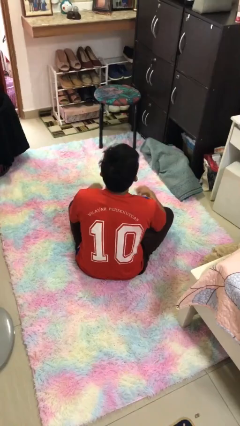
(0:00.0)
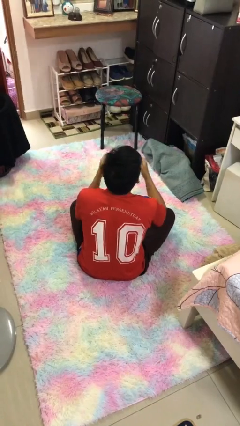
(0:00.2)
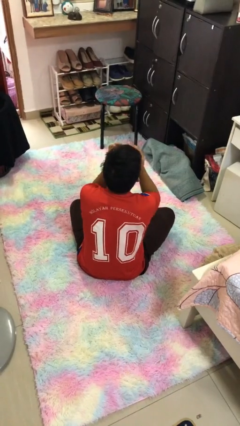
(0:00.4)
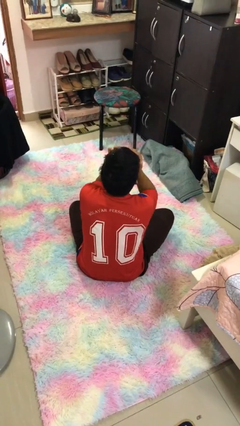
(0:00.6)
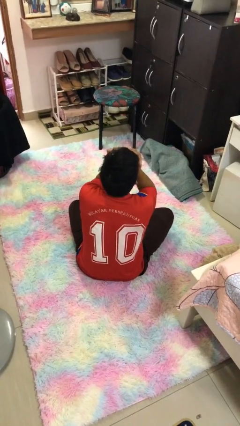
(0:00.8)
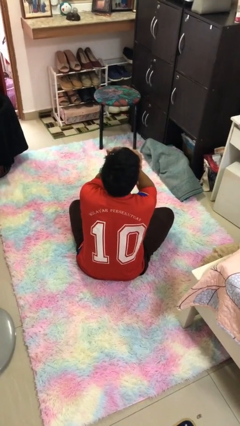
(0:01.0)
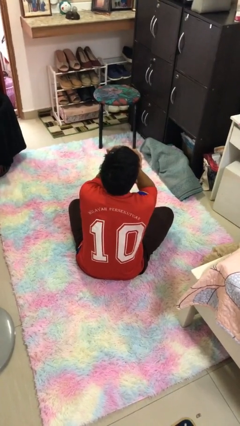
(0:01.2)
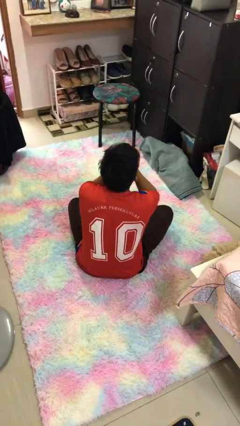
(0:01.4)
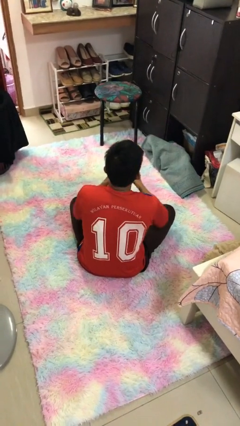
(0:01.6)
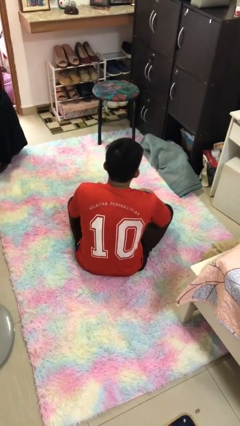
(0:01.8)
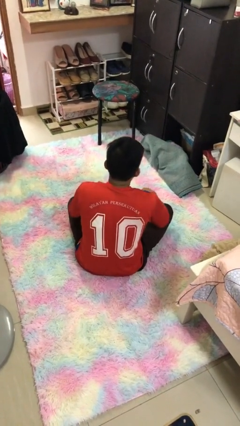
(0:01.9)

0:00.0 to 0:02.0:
person covers face with hands

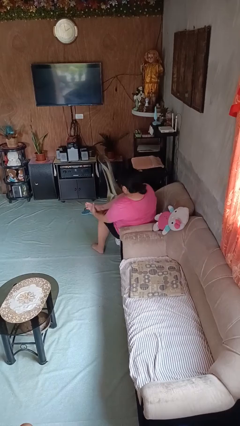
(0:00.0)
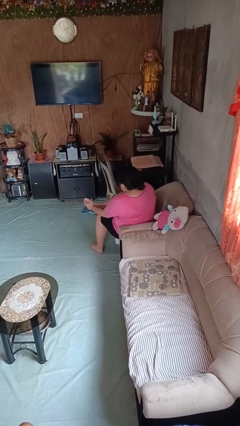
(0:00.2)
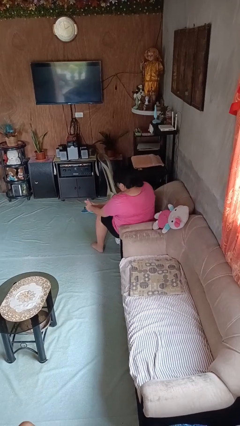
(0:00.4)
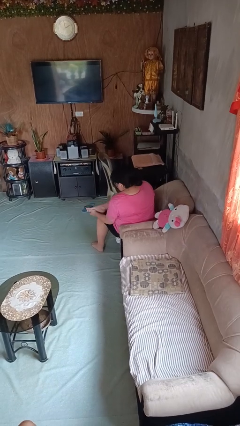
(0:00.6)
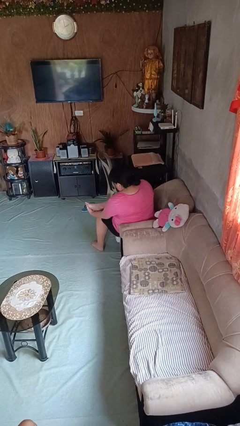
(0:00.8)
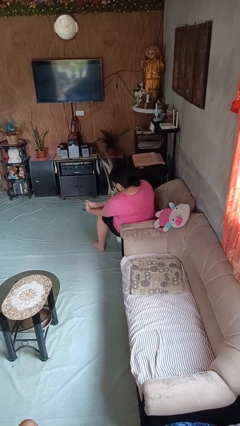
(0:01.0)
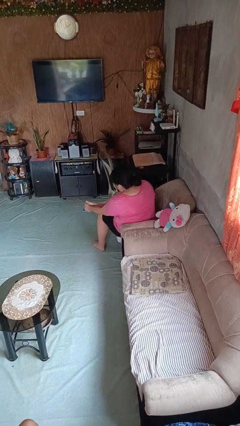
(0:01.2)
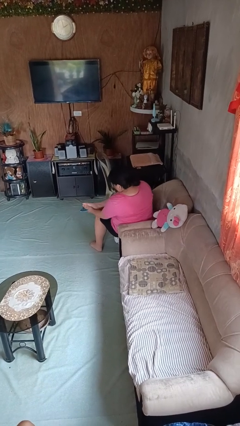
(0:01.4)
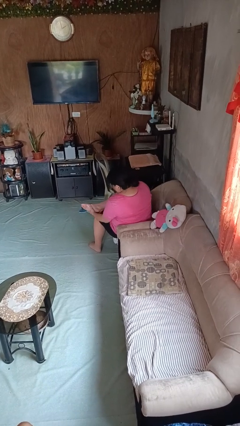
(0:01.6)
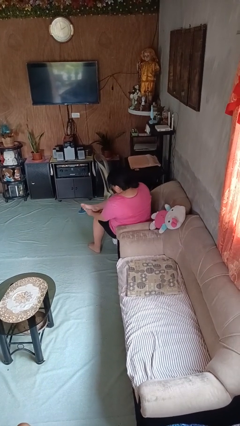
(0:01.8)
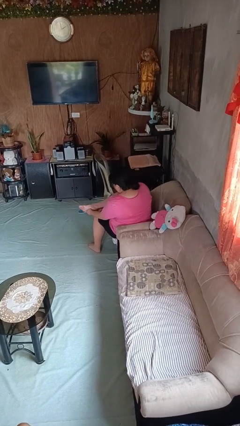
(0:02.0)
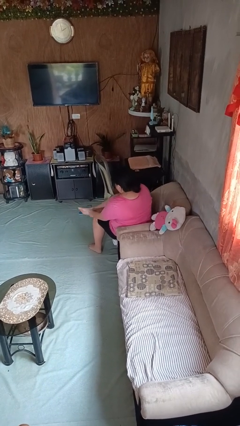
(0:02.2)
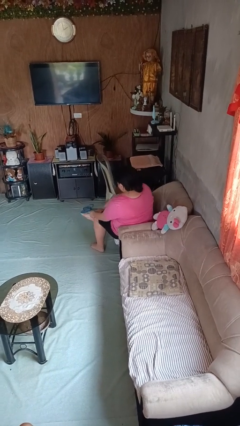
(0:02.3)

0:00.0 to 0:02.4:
person rubs foot

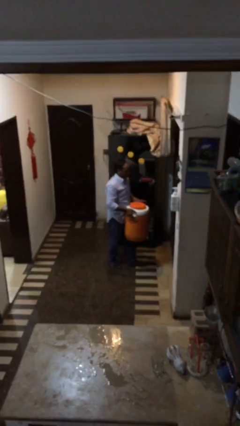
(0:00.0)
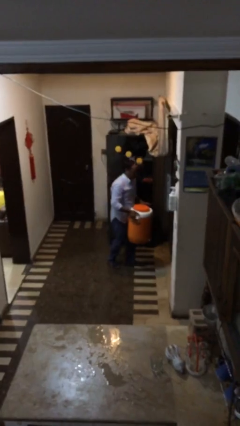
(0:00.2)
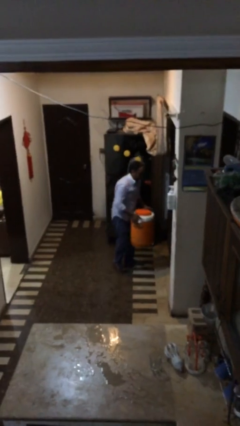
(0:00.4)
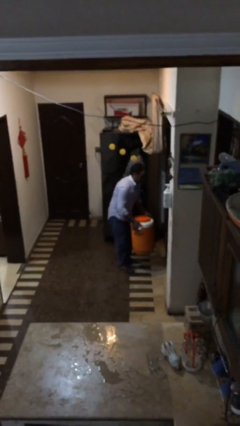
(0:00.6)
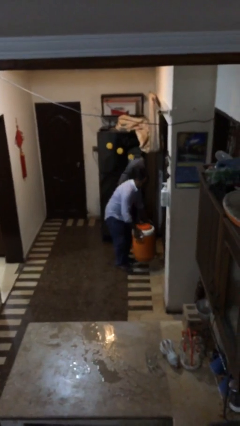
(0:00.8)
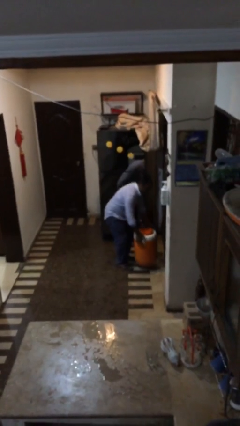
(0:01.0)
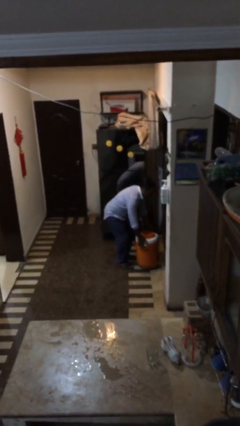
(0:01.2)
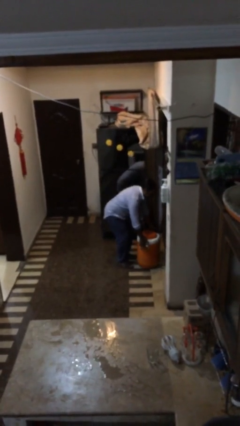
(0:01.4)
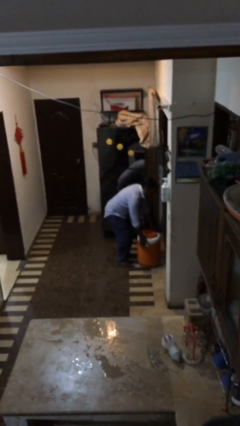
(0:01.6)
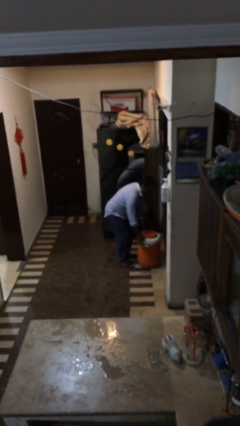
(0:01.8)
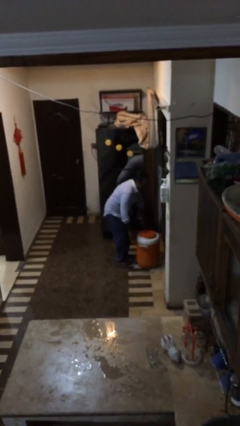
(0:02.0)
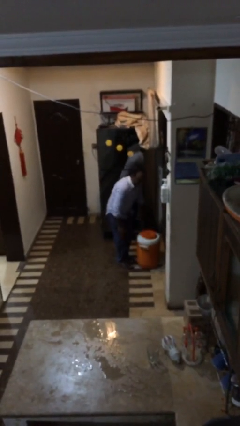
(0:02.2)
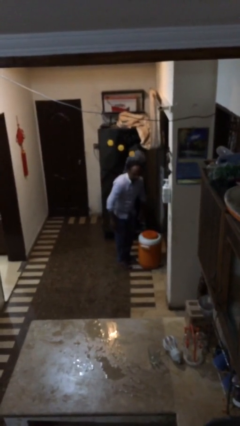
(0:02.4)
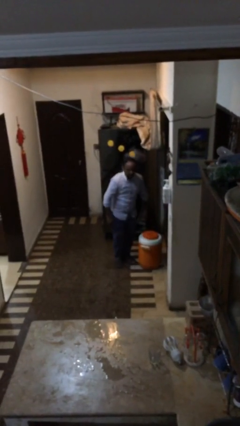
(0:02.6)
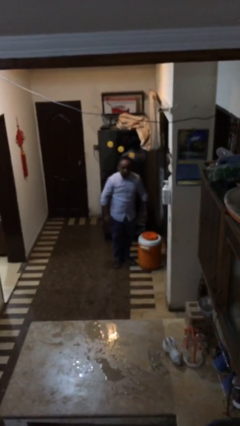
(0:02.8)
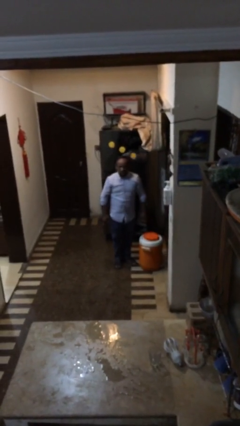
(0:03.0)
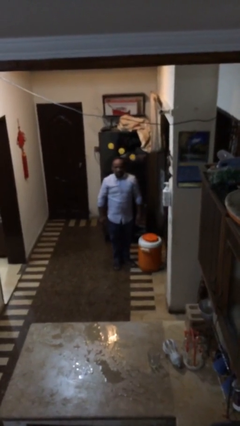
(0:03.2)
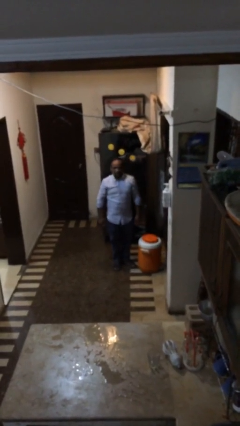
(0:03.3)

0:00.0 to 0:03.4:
person puts down object on floor

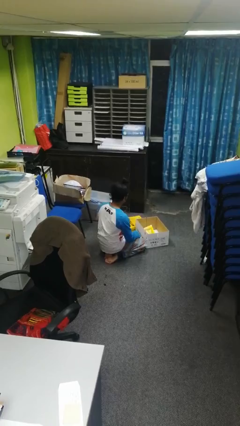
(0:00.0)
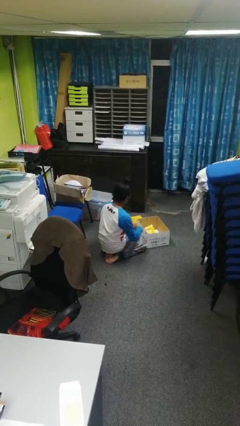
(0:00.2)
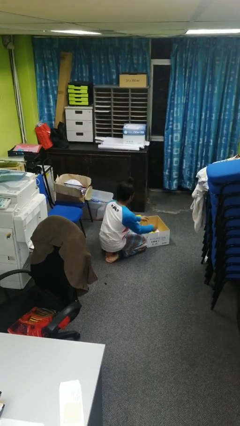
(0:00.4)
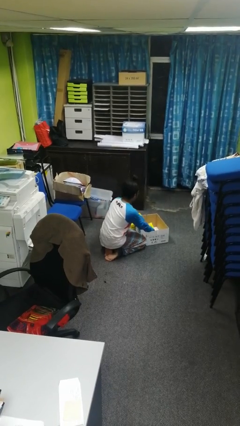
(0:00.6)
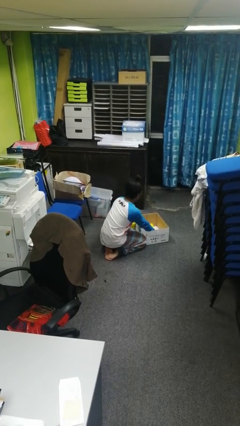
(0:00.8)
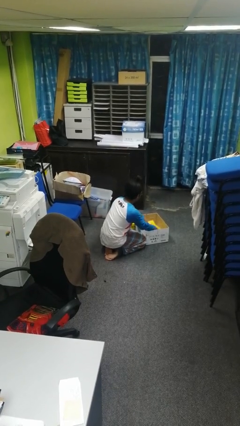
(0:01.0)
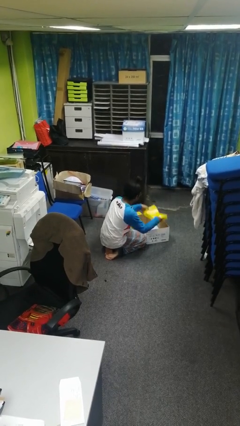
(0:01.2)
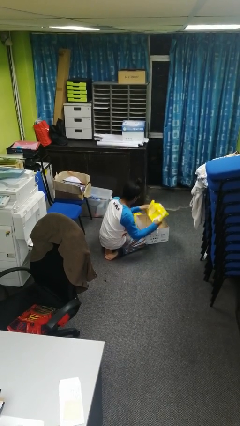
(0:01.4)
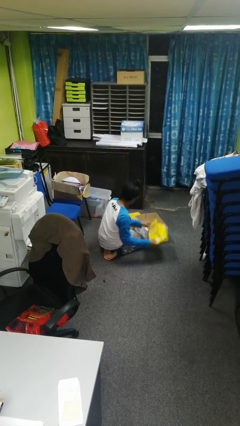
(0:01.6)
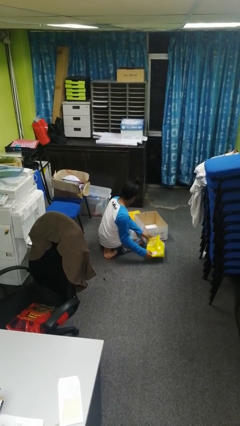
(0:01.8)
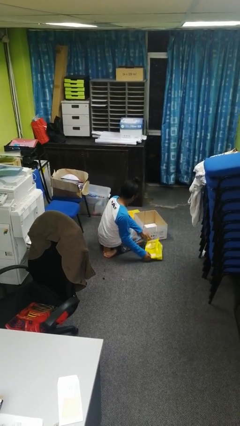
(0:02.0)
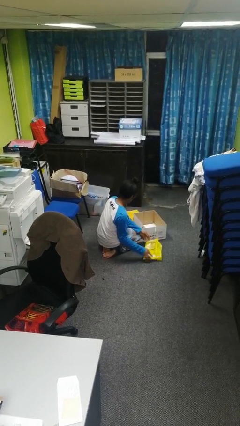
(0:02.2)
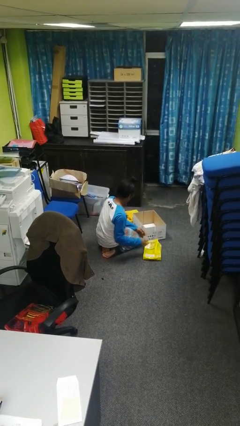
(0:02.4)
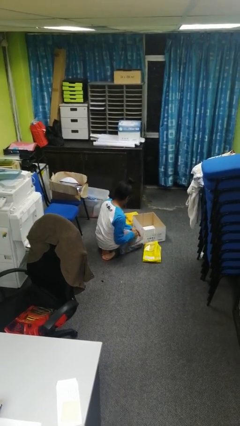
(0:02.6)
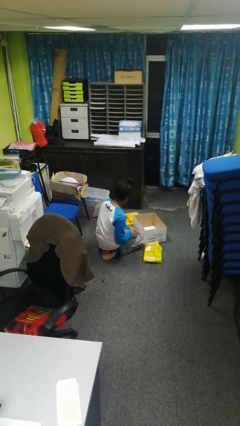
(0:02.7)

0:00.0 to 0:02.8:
person takes object from box

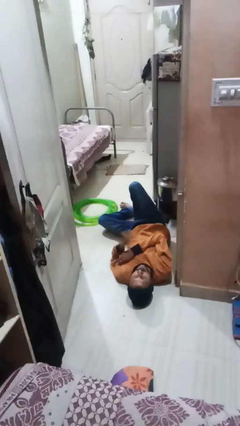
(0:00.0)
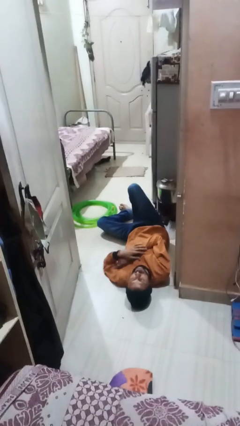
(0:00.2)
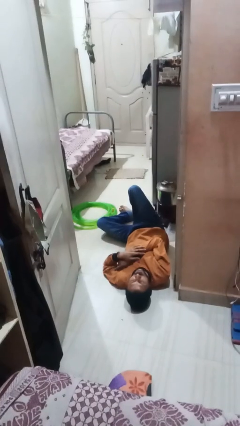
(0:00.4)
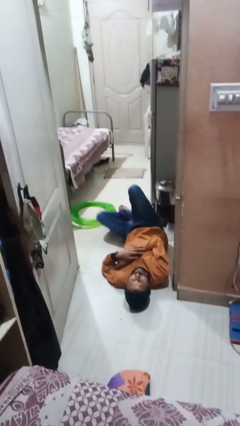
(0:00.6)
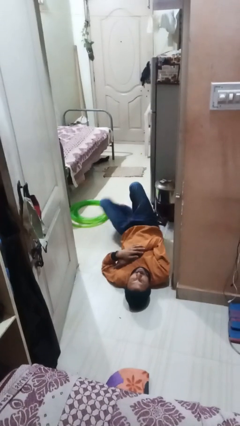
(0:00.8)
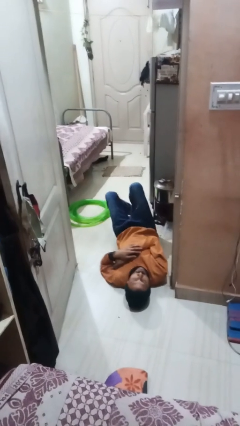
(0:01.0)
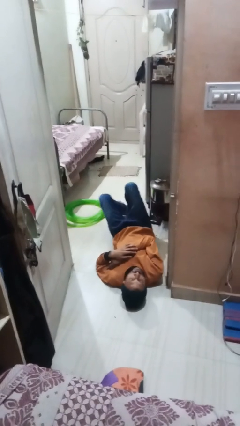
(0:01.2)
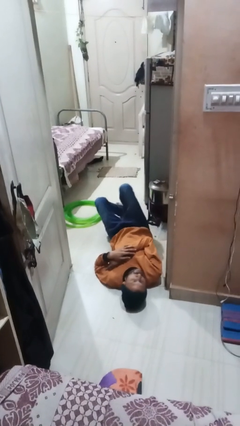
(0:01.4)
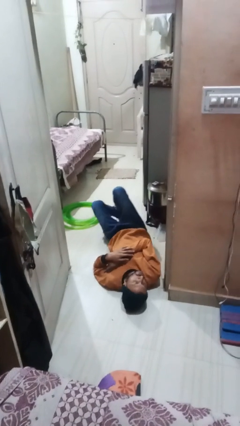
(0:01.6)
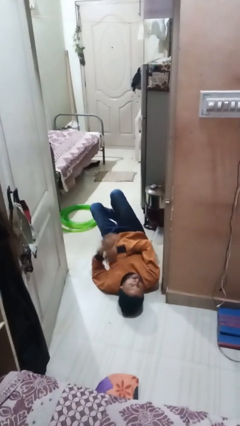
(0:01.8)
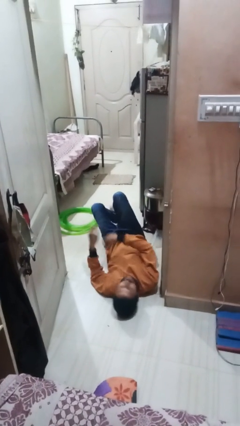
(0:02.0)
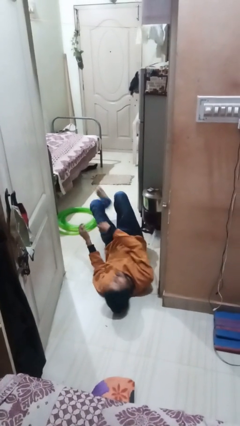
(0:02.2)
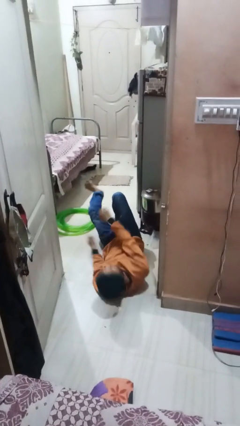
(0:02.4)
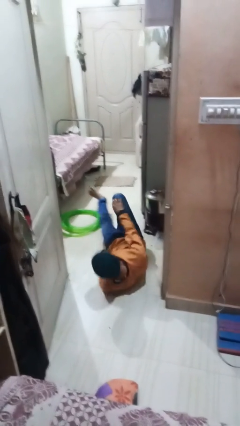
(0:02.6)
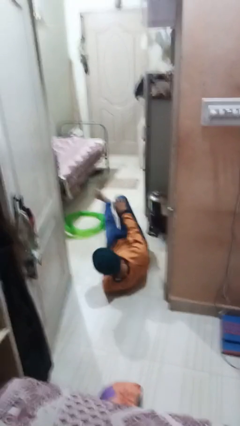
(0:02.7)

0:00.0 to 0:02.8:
person lies down on floor

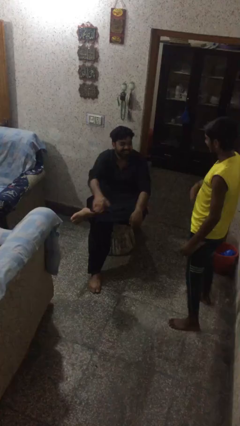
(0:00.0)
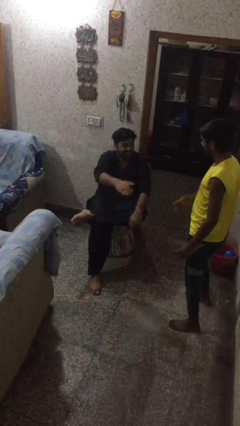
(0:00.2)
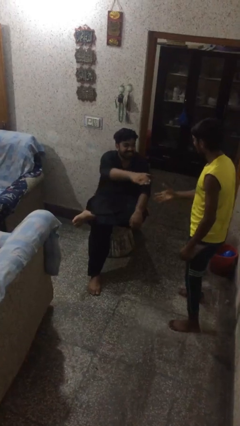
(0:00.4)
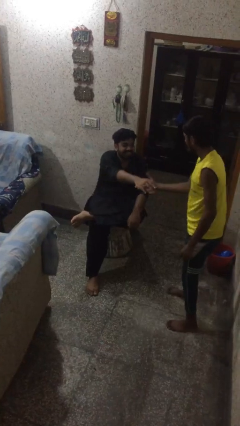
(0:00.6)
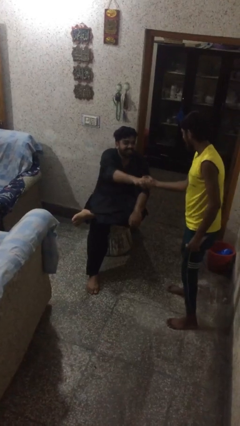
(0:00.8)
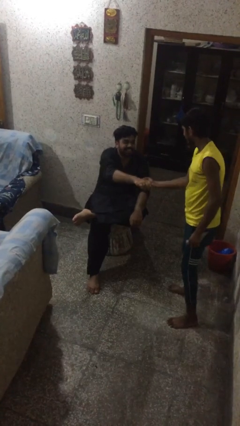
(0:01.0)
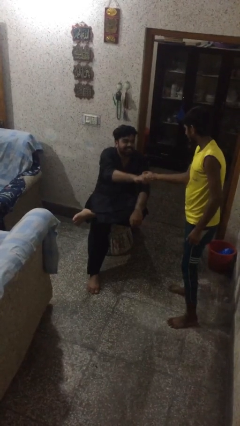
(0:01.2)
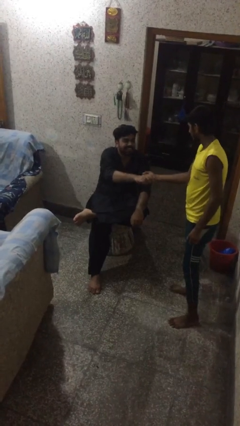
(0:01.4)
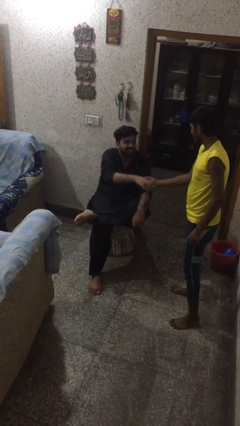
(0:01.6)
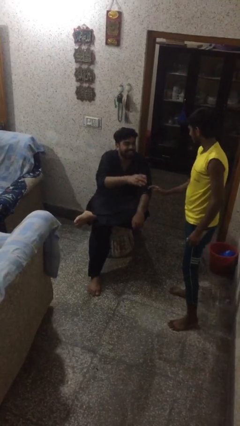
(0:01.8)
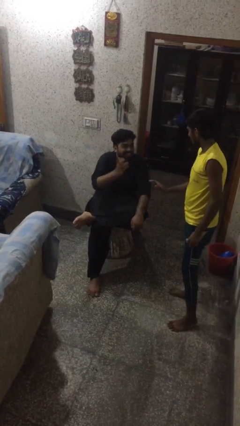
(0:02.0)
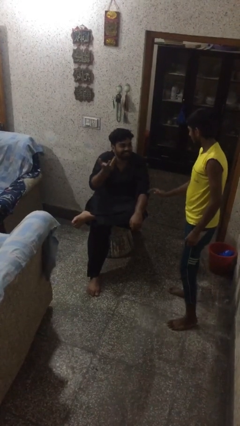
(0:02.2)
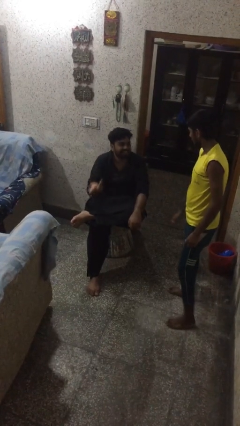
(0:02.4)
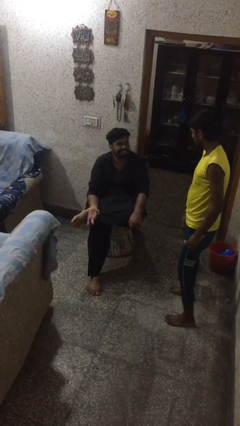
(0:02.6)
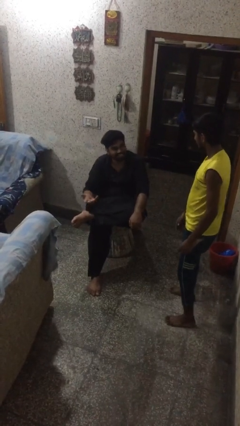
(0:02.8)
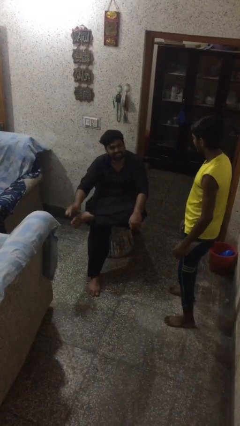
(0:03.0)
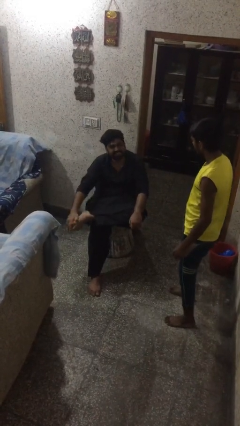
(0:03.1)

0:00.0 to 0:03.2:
person shakes hand

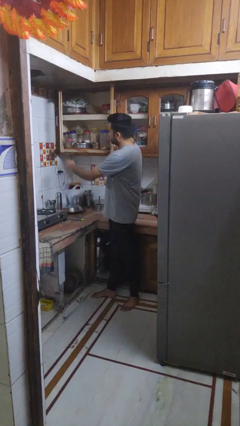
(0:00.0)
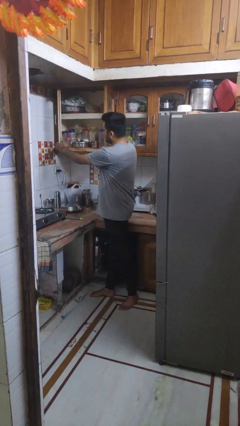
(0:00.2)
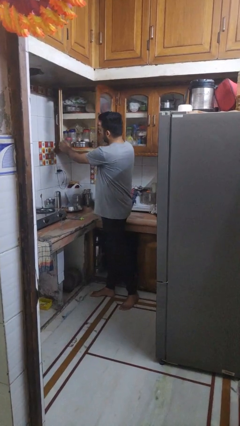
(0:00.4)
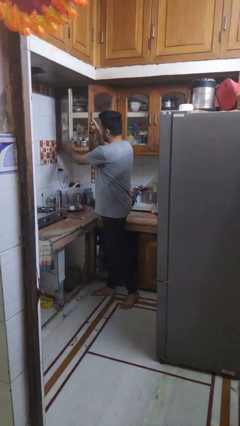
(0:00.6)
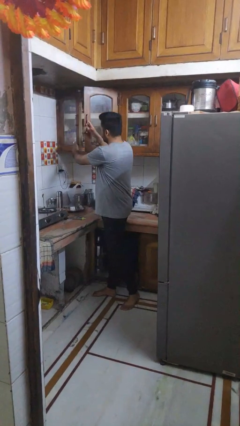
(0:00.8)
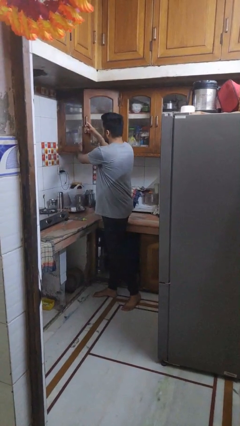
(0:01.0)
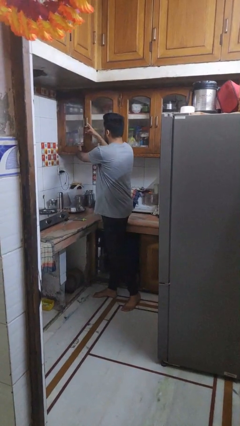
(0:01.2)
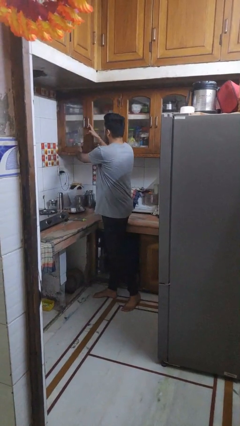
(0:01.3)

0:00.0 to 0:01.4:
person closes cabinet
